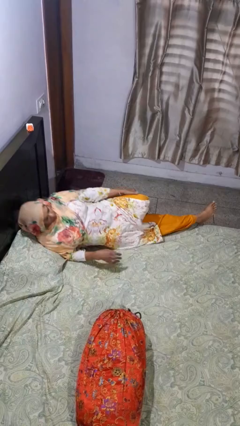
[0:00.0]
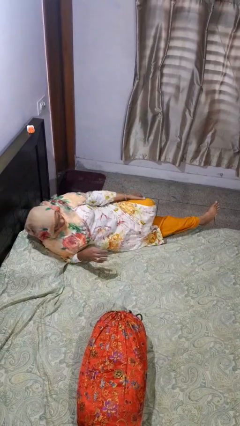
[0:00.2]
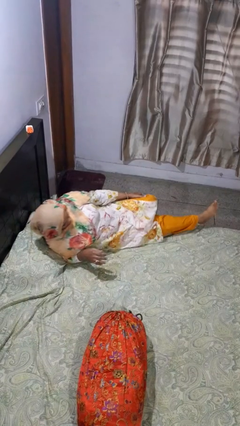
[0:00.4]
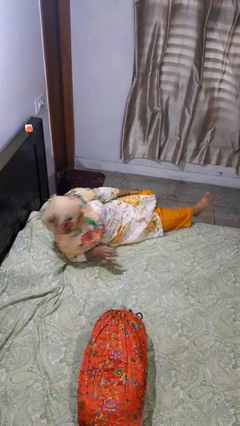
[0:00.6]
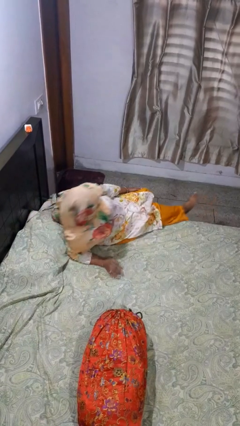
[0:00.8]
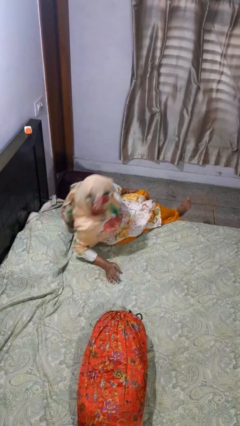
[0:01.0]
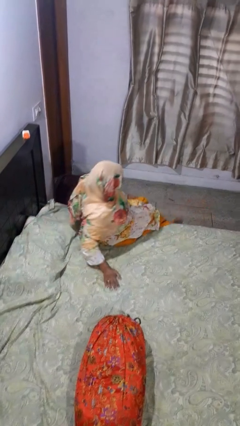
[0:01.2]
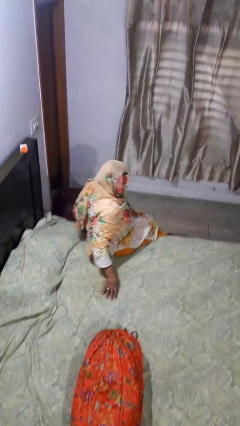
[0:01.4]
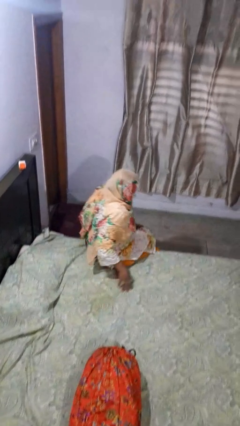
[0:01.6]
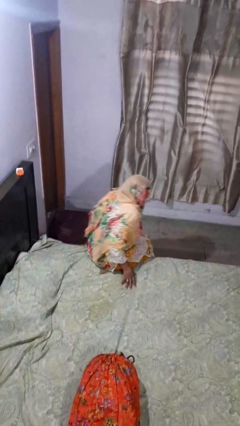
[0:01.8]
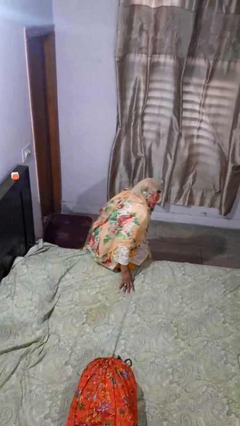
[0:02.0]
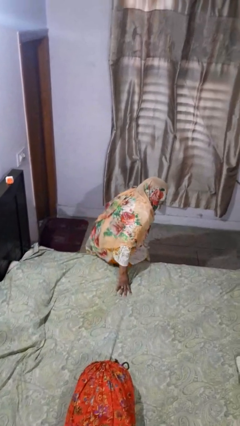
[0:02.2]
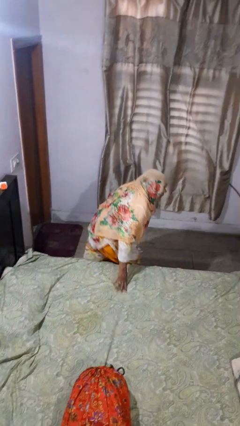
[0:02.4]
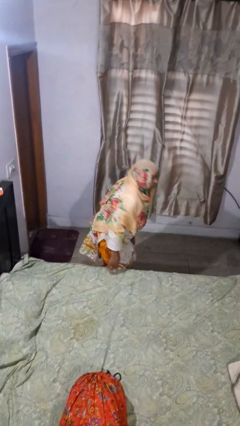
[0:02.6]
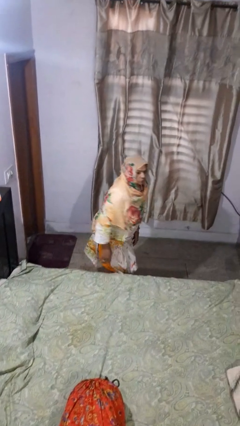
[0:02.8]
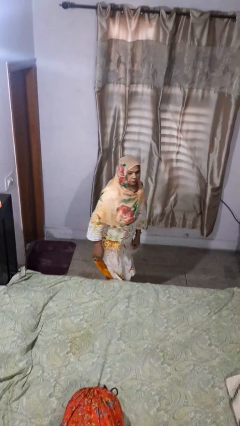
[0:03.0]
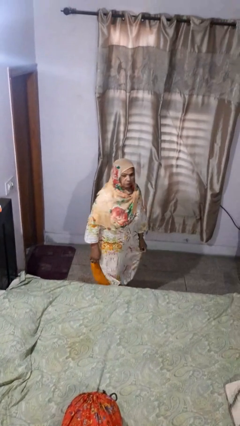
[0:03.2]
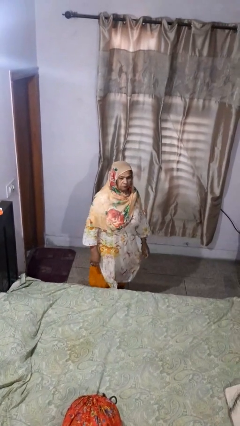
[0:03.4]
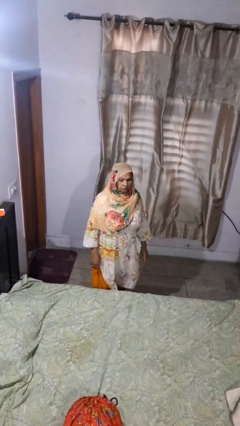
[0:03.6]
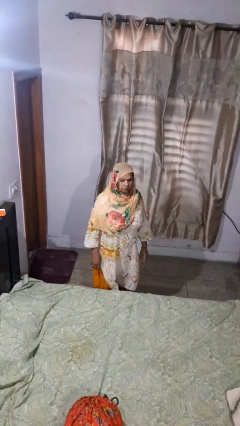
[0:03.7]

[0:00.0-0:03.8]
person stands up

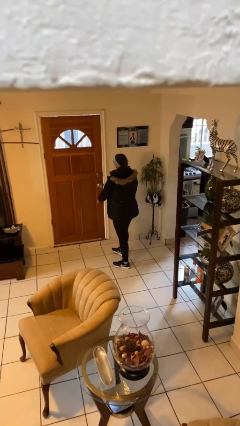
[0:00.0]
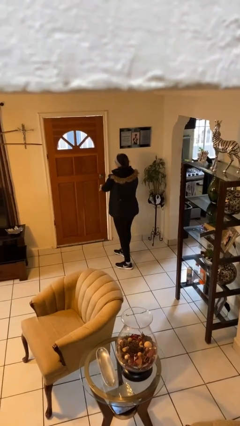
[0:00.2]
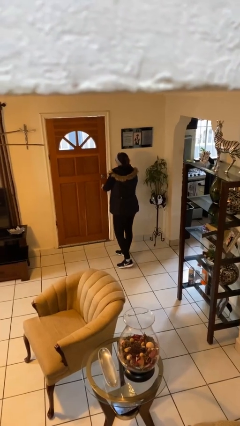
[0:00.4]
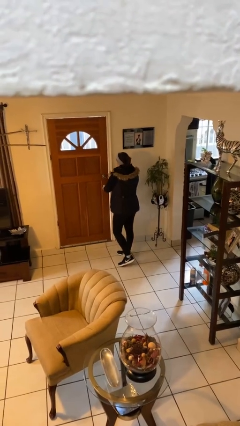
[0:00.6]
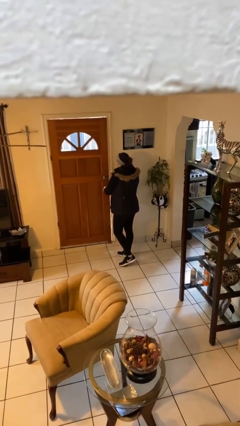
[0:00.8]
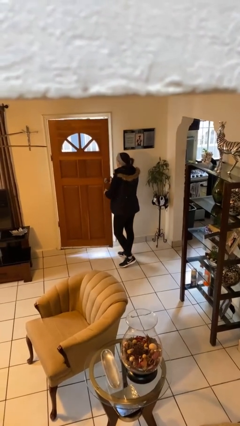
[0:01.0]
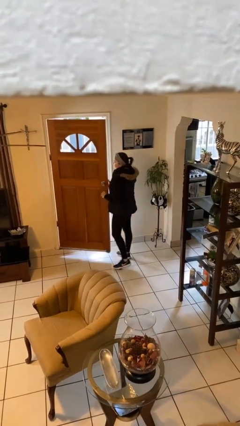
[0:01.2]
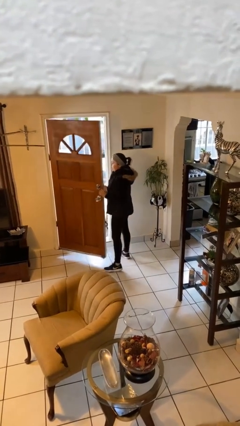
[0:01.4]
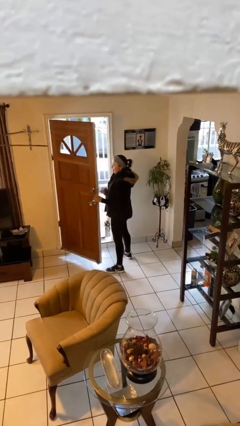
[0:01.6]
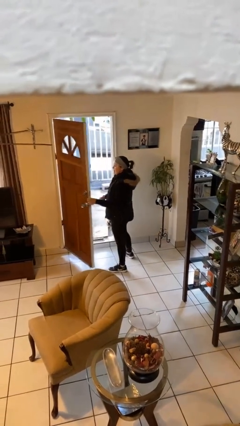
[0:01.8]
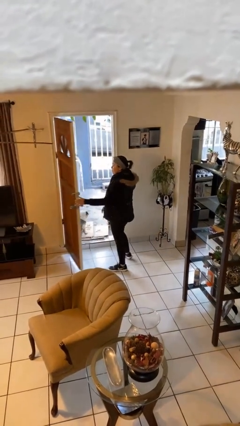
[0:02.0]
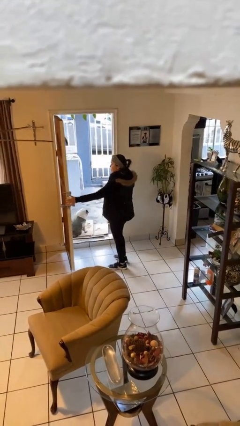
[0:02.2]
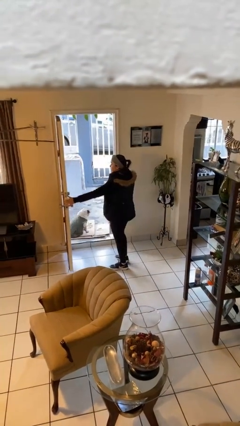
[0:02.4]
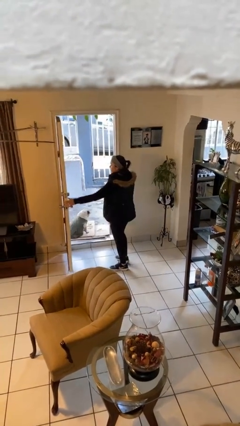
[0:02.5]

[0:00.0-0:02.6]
person opens facility door

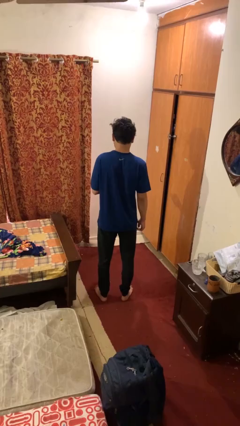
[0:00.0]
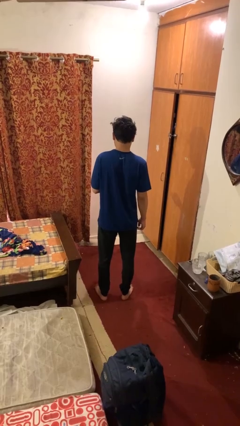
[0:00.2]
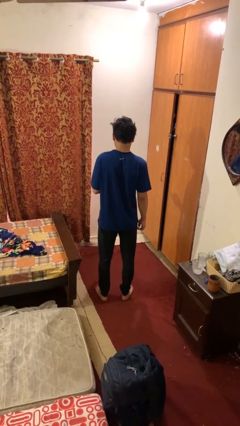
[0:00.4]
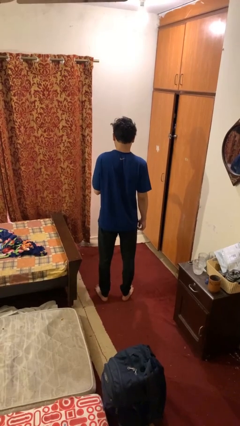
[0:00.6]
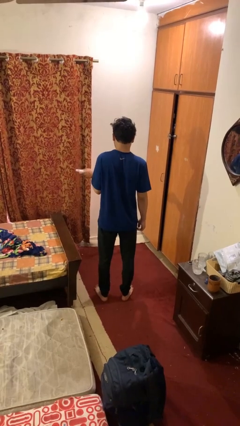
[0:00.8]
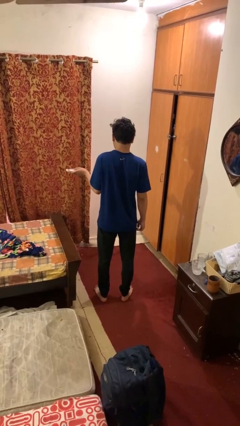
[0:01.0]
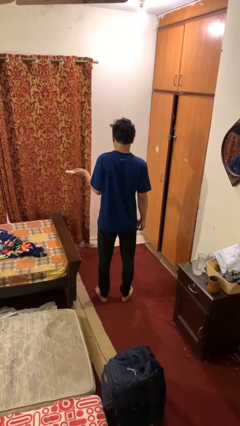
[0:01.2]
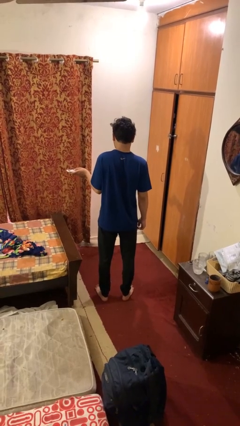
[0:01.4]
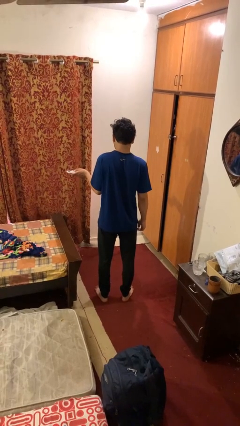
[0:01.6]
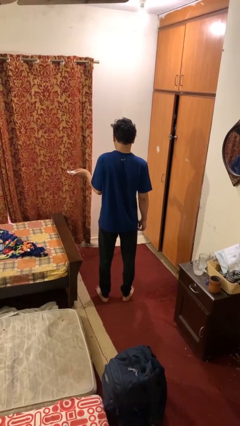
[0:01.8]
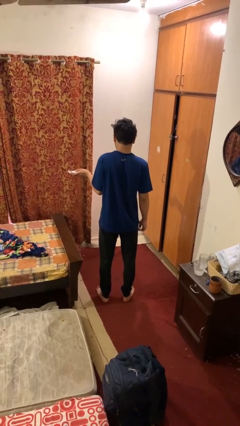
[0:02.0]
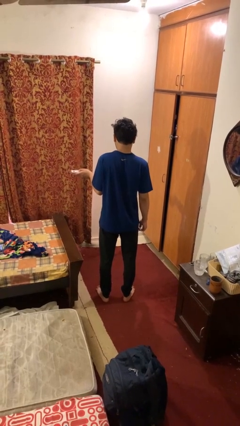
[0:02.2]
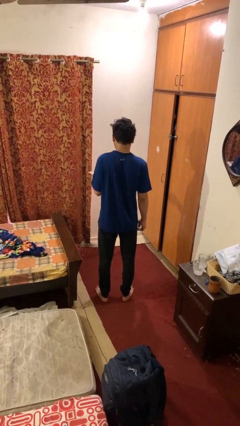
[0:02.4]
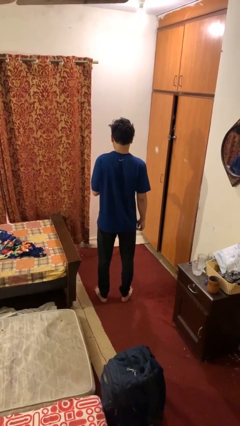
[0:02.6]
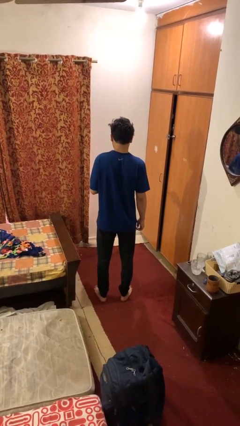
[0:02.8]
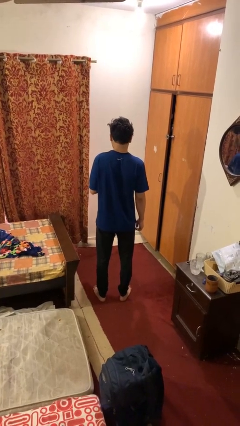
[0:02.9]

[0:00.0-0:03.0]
person uses television remote

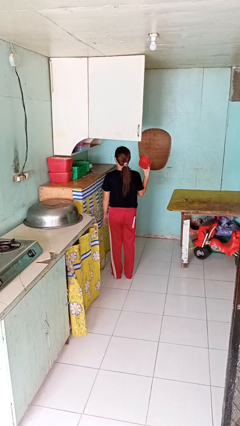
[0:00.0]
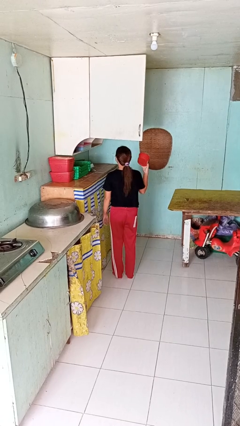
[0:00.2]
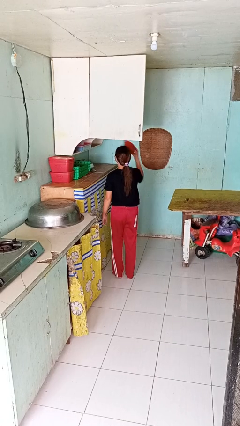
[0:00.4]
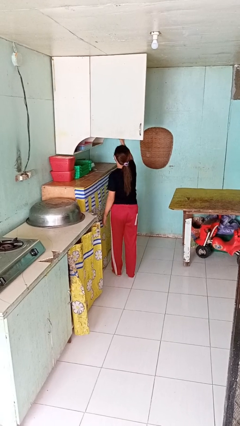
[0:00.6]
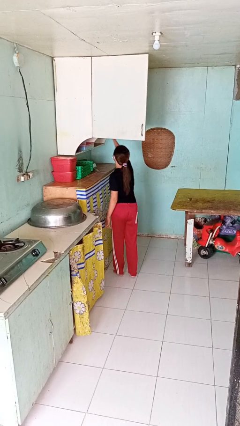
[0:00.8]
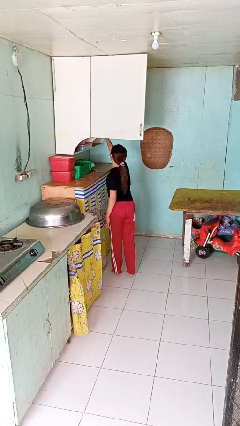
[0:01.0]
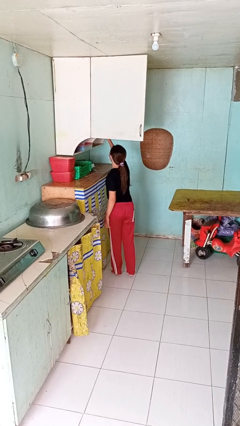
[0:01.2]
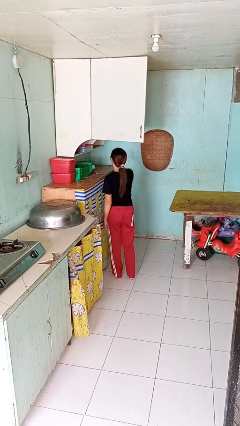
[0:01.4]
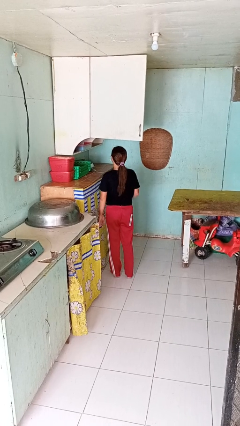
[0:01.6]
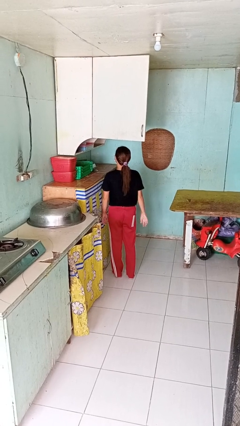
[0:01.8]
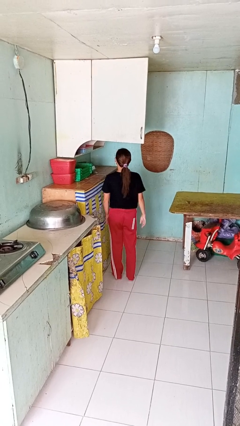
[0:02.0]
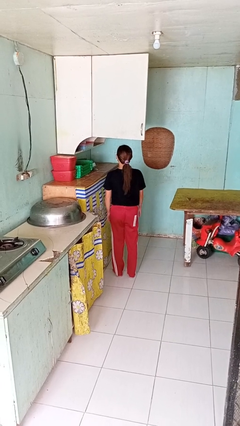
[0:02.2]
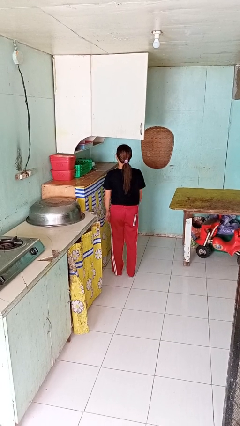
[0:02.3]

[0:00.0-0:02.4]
person puts object in cabinet

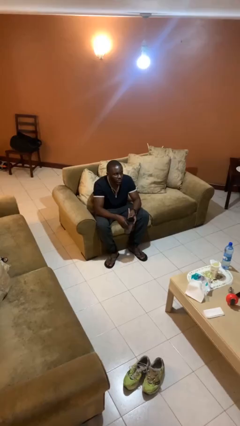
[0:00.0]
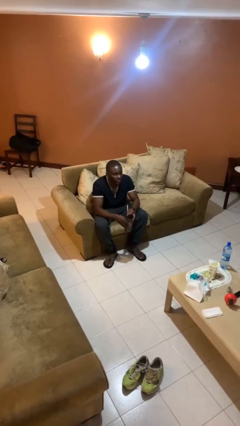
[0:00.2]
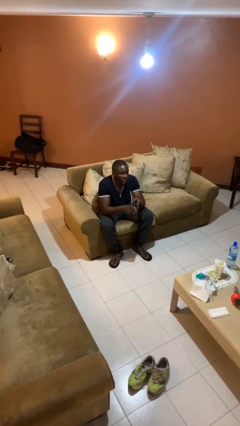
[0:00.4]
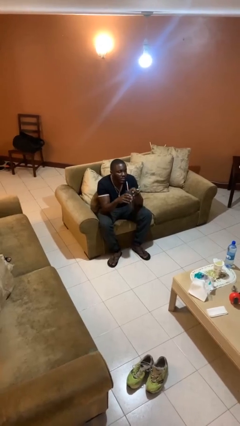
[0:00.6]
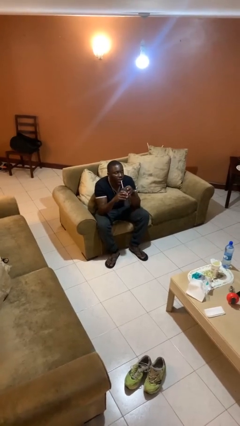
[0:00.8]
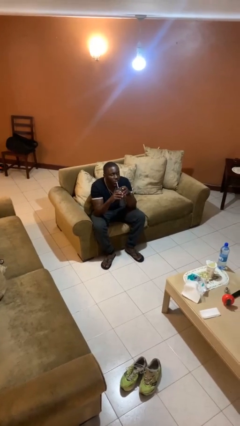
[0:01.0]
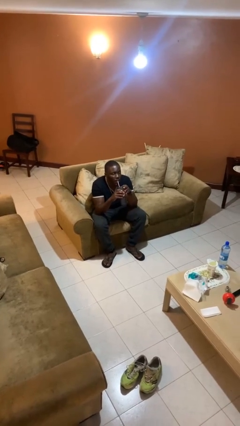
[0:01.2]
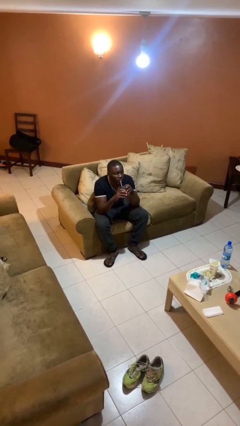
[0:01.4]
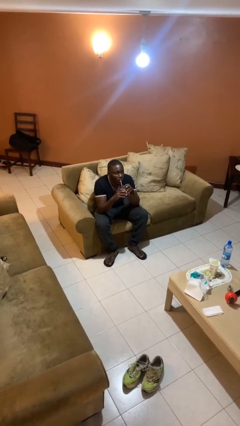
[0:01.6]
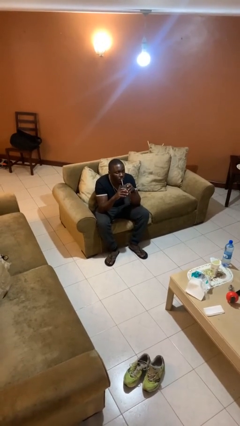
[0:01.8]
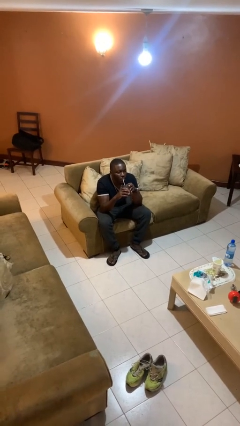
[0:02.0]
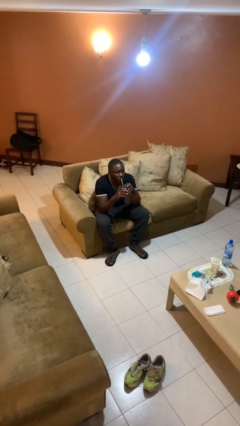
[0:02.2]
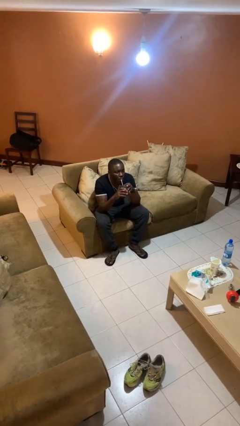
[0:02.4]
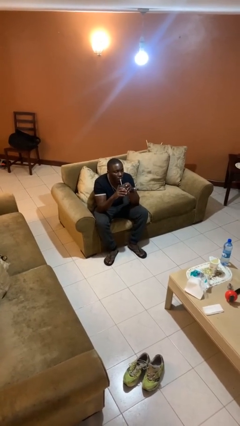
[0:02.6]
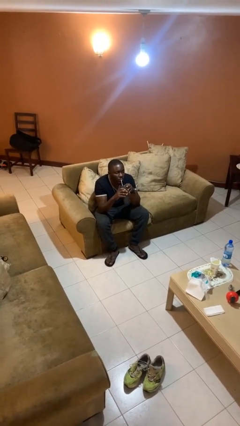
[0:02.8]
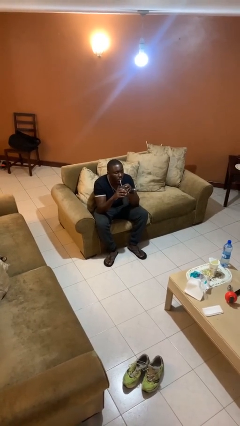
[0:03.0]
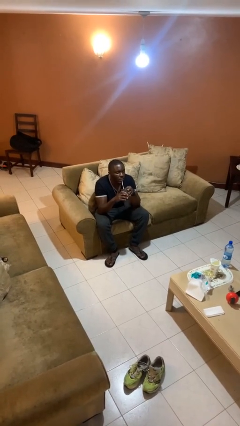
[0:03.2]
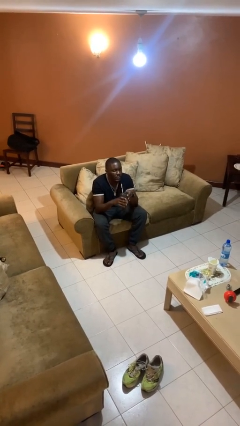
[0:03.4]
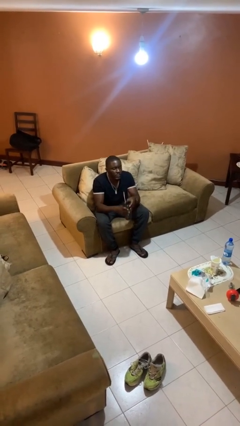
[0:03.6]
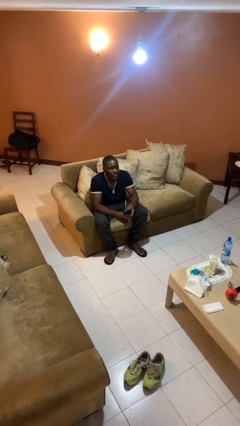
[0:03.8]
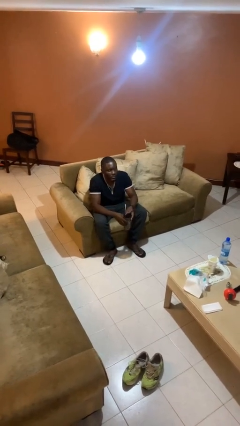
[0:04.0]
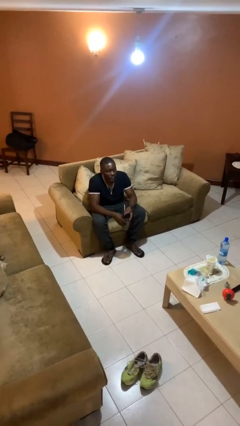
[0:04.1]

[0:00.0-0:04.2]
person drinks from straw

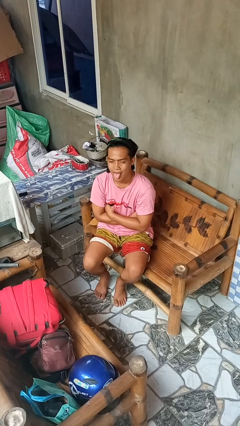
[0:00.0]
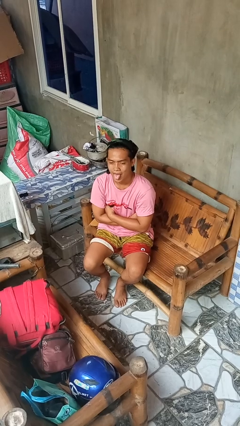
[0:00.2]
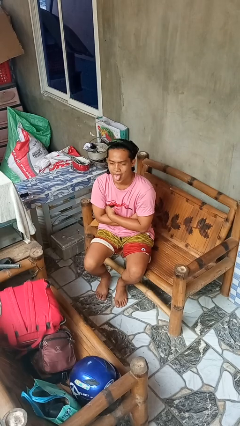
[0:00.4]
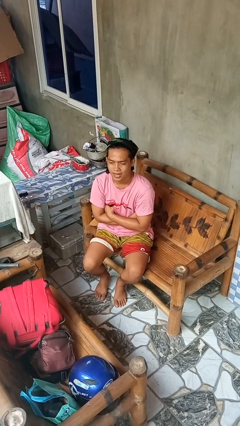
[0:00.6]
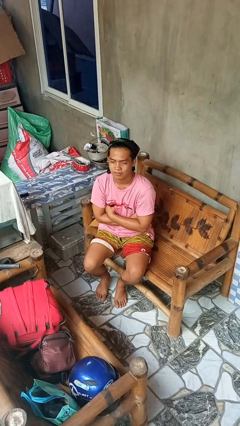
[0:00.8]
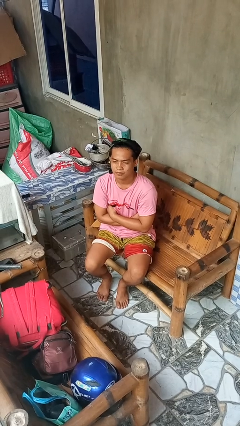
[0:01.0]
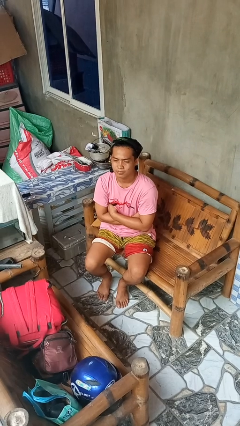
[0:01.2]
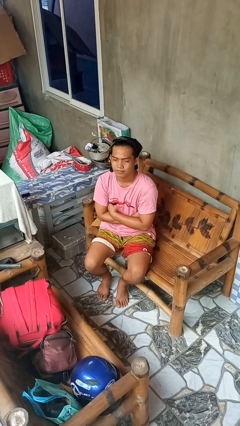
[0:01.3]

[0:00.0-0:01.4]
person sticks out tongue

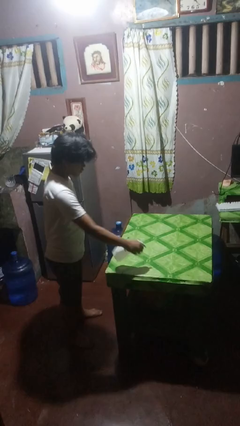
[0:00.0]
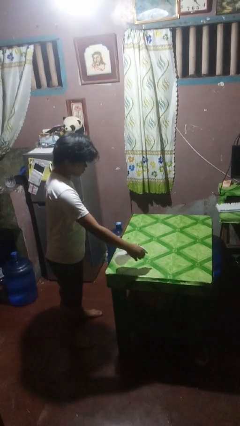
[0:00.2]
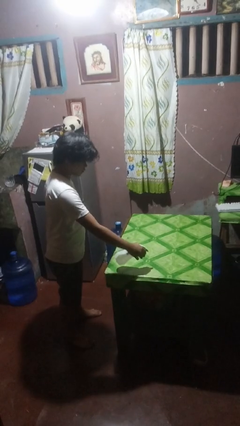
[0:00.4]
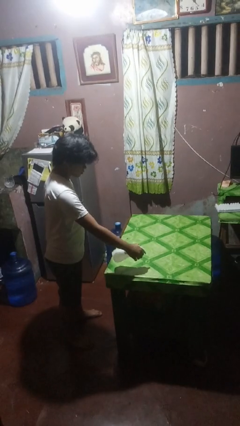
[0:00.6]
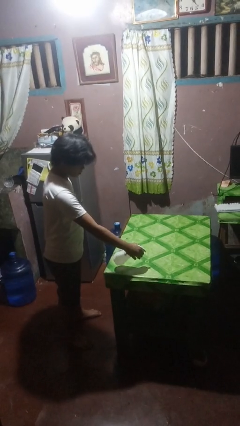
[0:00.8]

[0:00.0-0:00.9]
person sprays from bottle
